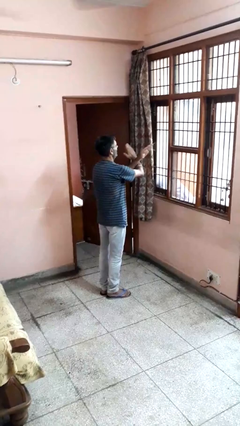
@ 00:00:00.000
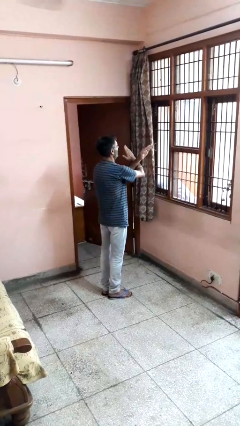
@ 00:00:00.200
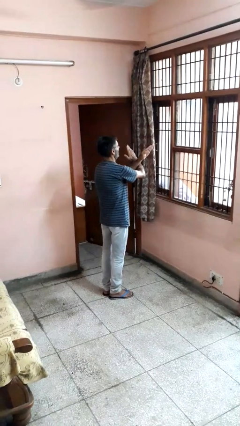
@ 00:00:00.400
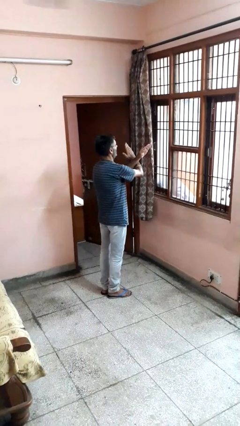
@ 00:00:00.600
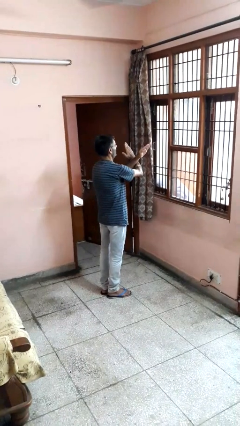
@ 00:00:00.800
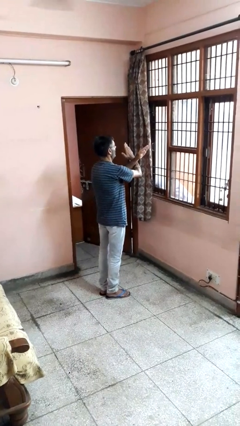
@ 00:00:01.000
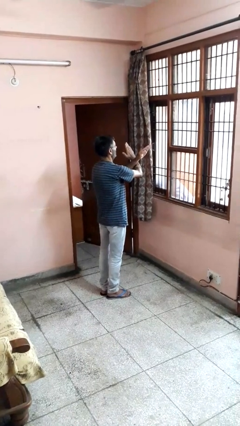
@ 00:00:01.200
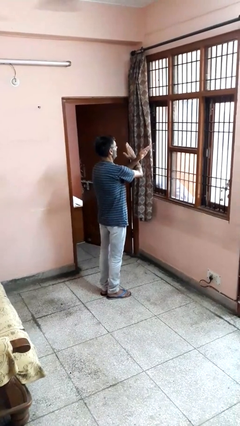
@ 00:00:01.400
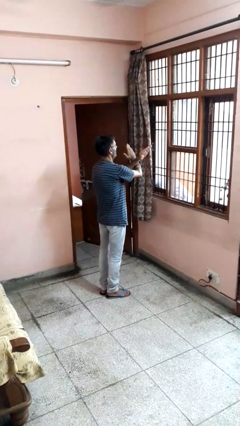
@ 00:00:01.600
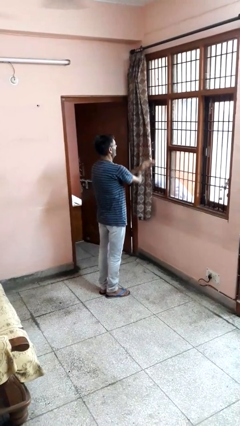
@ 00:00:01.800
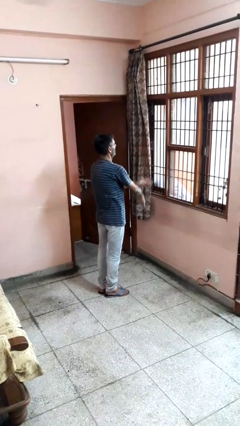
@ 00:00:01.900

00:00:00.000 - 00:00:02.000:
person gestures arms x

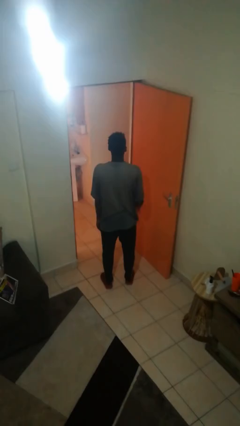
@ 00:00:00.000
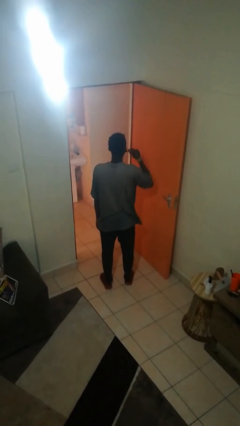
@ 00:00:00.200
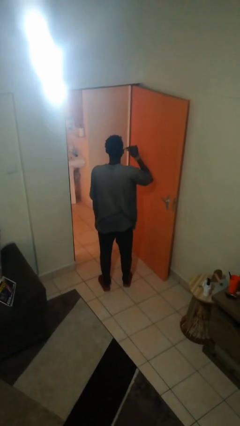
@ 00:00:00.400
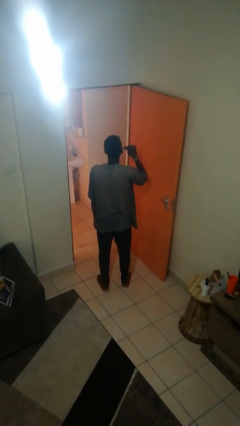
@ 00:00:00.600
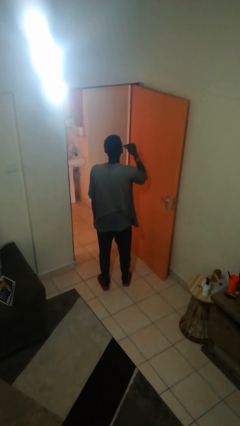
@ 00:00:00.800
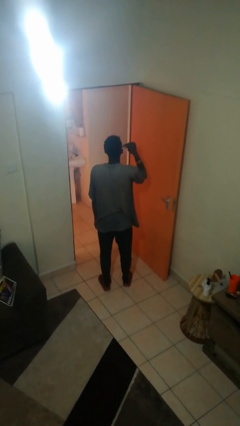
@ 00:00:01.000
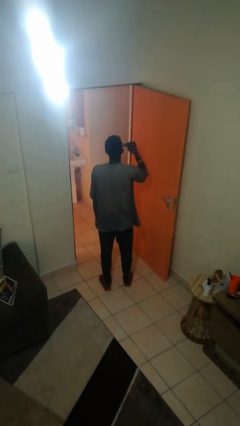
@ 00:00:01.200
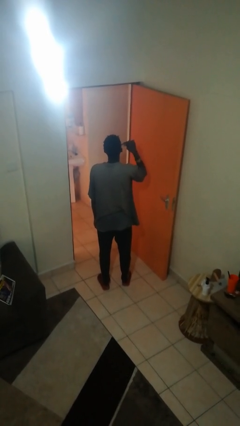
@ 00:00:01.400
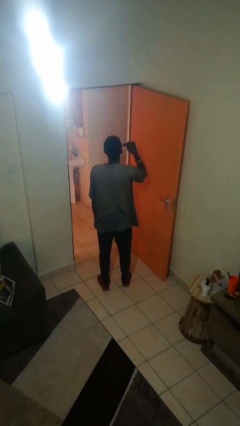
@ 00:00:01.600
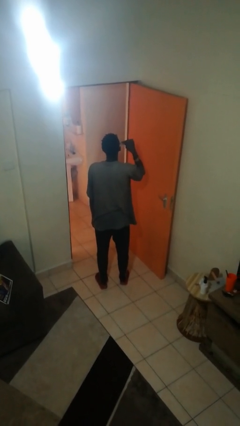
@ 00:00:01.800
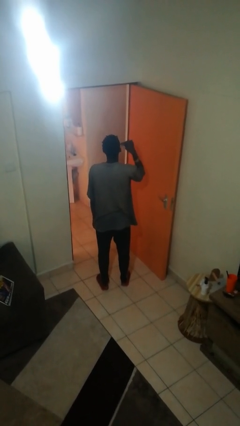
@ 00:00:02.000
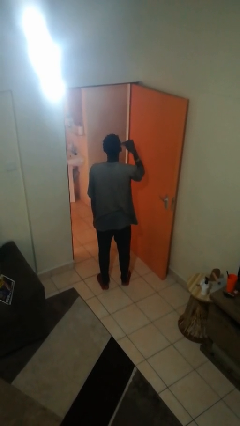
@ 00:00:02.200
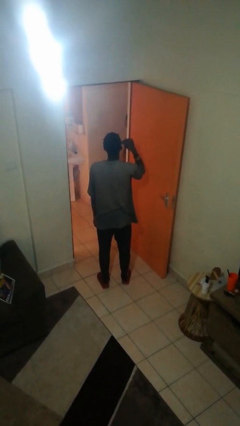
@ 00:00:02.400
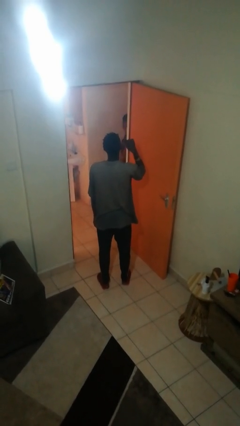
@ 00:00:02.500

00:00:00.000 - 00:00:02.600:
person brushes teeth

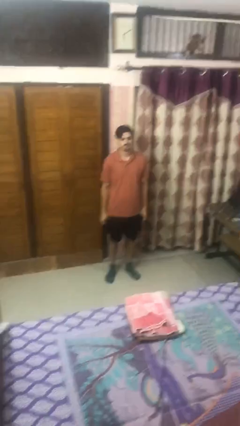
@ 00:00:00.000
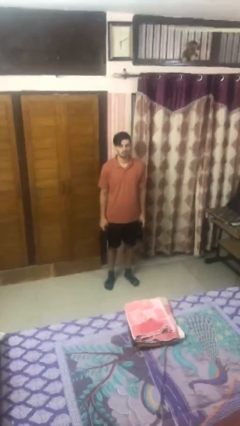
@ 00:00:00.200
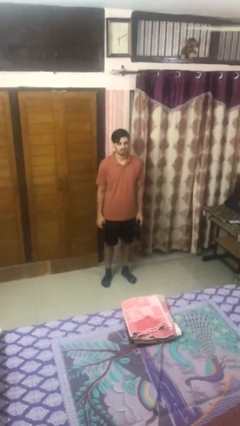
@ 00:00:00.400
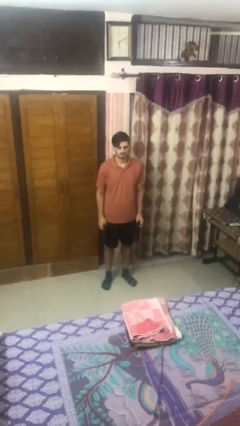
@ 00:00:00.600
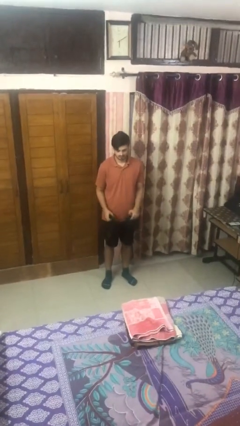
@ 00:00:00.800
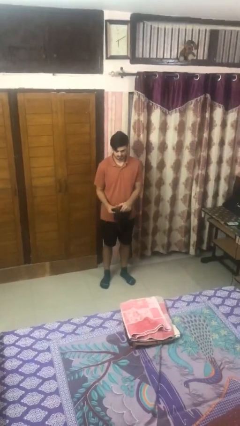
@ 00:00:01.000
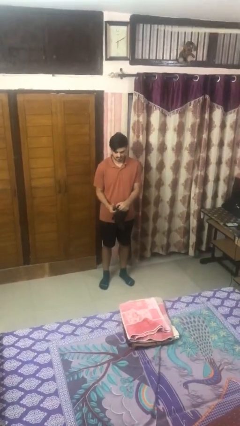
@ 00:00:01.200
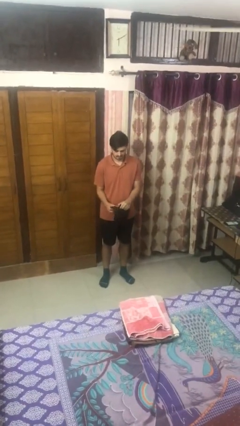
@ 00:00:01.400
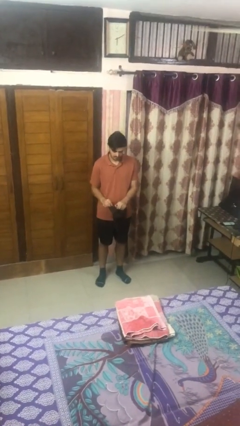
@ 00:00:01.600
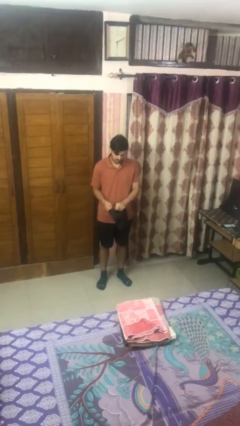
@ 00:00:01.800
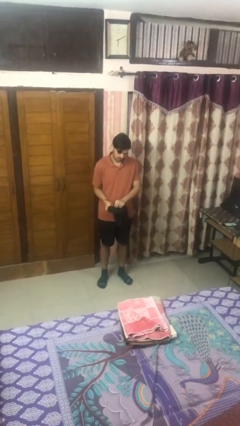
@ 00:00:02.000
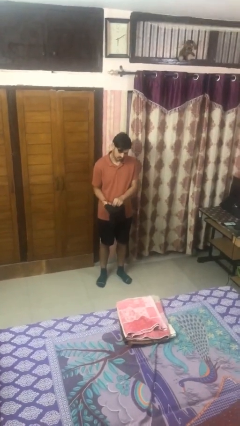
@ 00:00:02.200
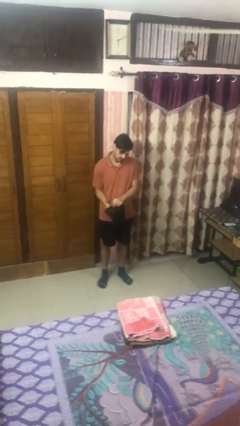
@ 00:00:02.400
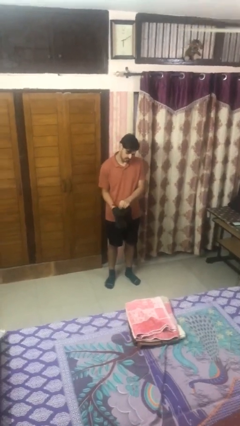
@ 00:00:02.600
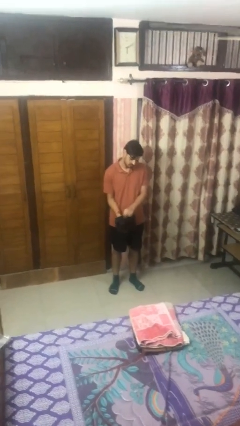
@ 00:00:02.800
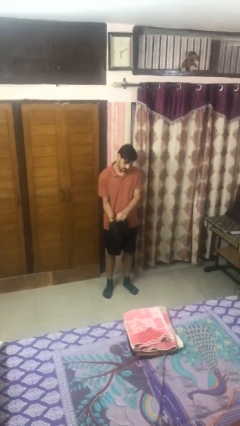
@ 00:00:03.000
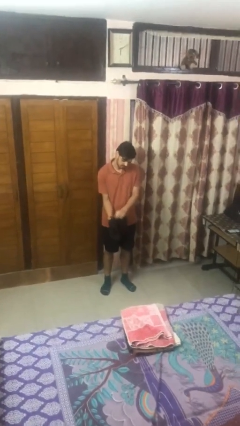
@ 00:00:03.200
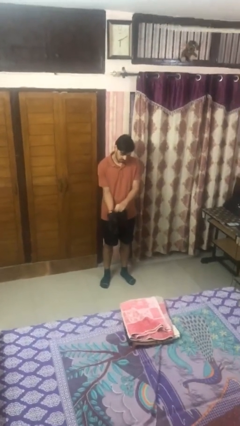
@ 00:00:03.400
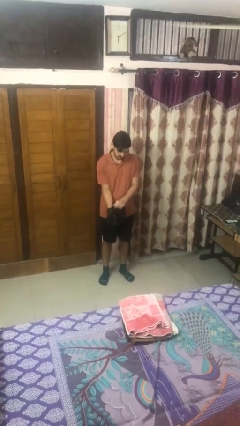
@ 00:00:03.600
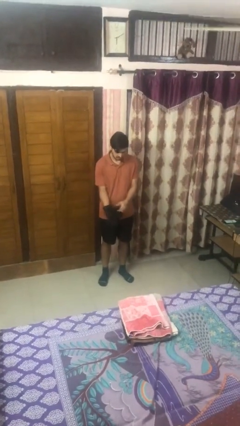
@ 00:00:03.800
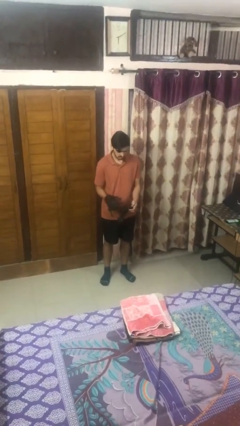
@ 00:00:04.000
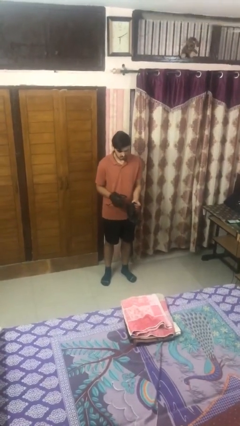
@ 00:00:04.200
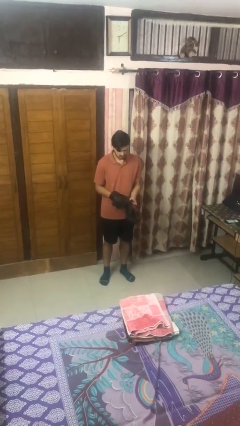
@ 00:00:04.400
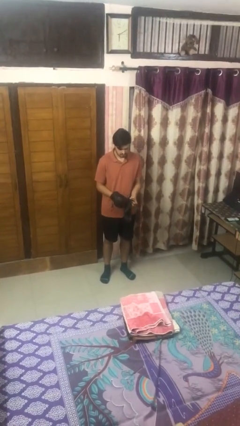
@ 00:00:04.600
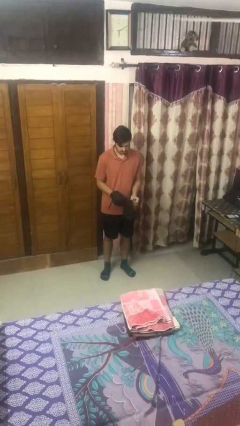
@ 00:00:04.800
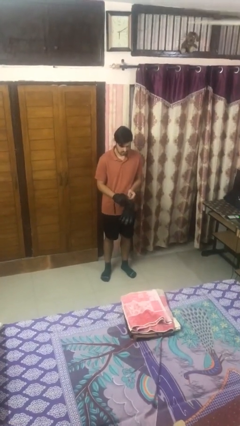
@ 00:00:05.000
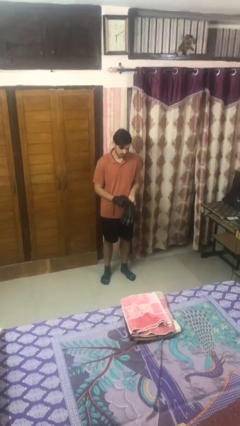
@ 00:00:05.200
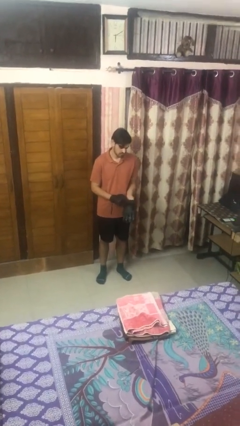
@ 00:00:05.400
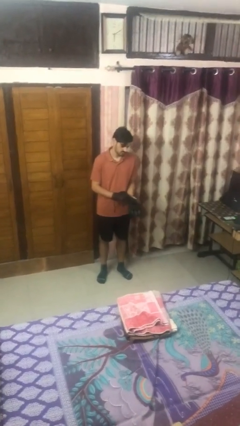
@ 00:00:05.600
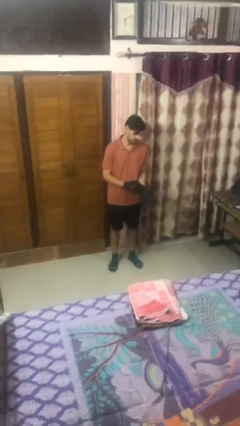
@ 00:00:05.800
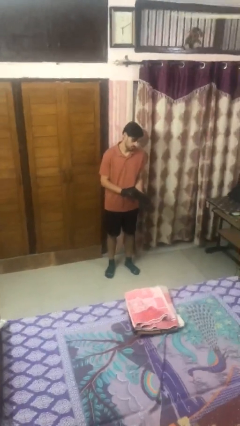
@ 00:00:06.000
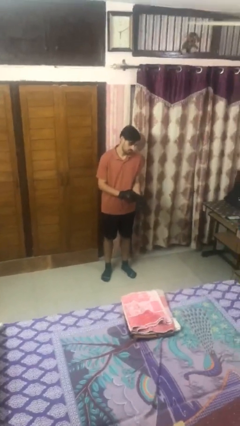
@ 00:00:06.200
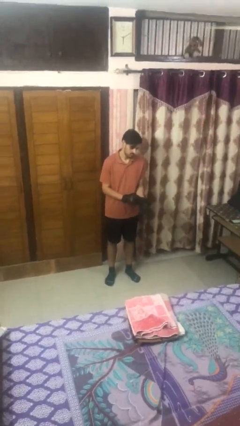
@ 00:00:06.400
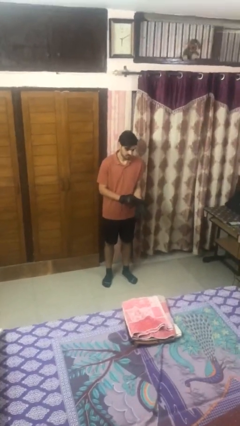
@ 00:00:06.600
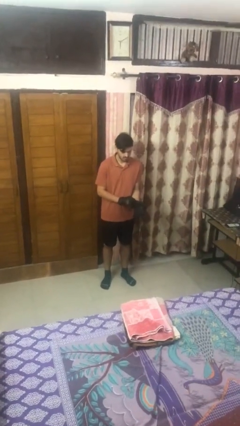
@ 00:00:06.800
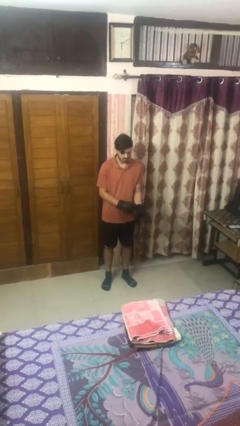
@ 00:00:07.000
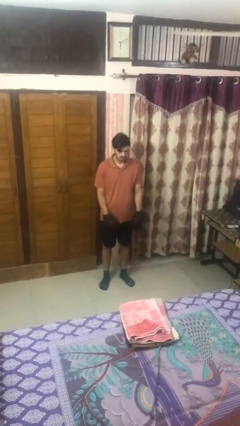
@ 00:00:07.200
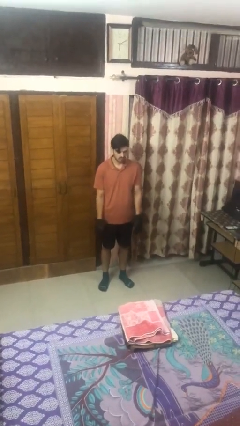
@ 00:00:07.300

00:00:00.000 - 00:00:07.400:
person puts on gloves

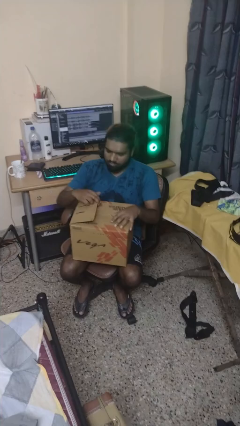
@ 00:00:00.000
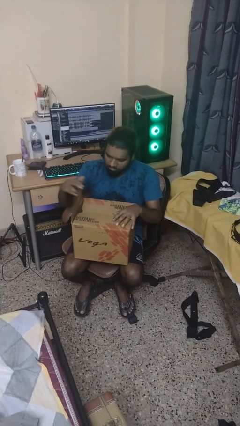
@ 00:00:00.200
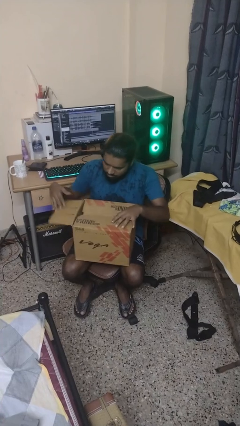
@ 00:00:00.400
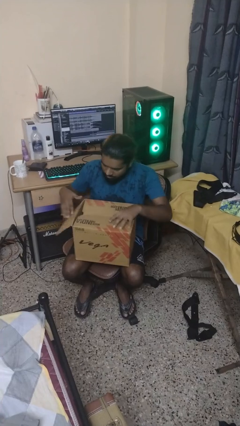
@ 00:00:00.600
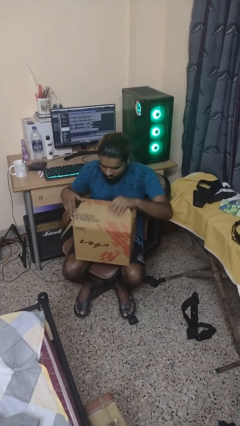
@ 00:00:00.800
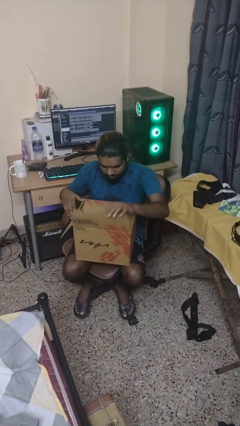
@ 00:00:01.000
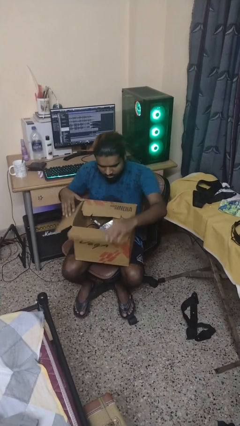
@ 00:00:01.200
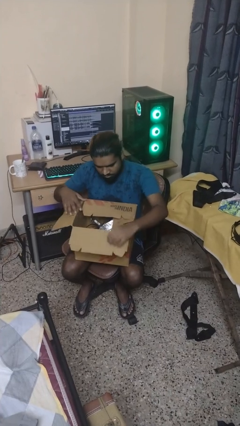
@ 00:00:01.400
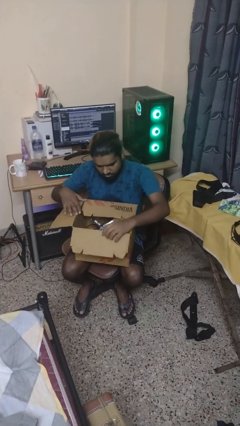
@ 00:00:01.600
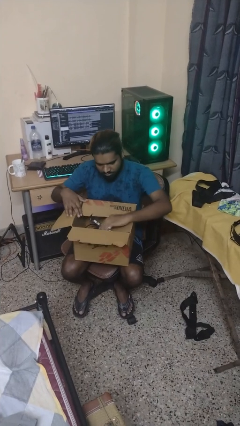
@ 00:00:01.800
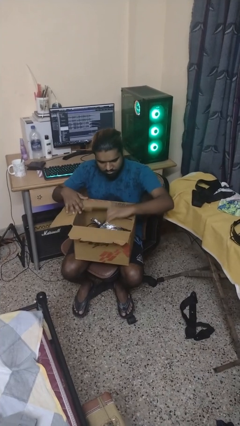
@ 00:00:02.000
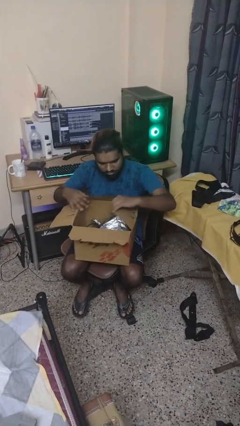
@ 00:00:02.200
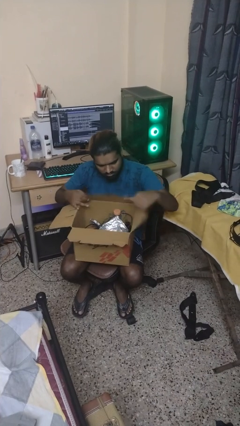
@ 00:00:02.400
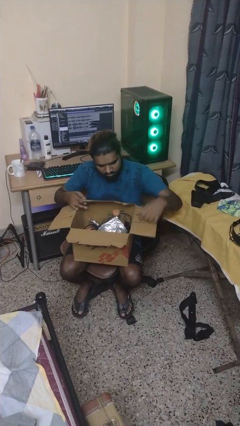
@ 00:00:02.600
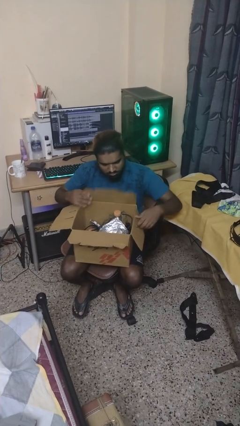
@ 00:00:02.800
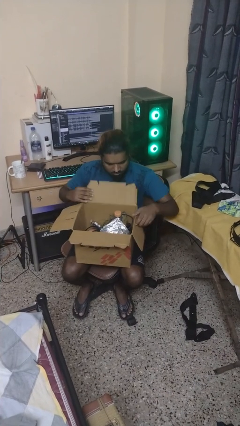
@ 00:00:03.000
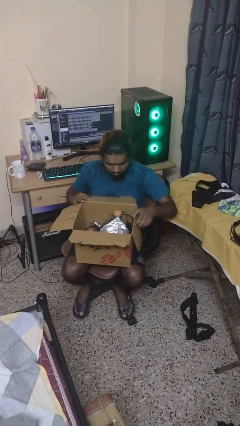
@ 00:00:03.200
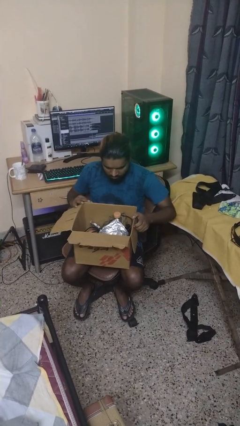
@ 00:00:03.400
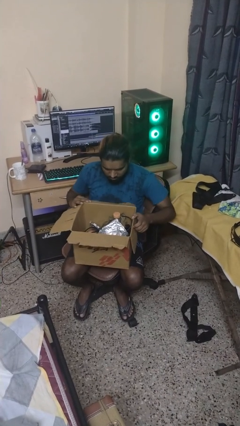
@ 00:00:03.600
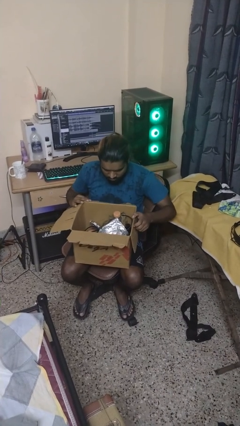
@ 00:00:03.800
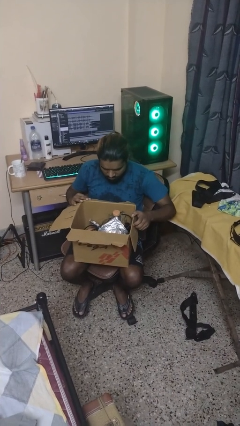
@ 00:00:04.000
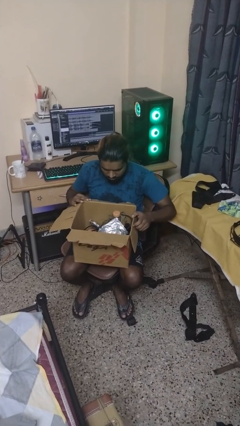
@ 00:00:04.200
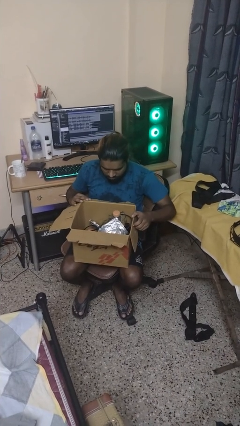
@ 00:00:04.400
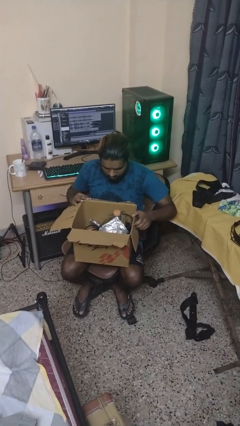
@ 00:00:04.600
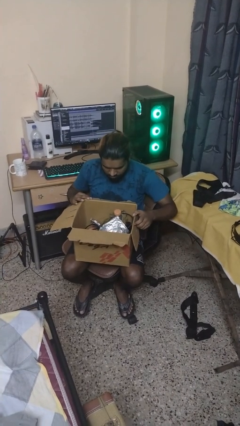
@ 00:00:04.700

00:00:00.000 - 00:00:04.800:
person opens box

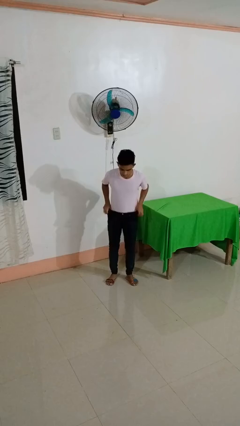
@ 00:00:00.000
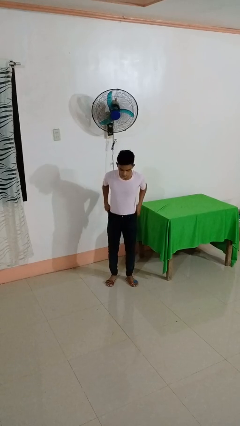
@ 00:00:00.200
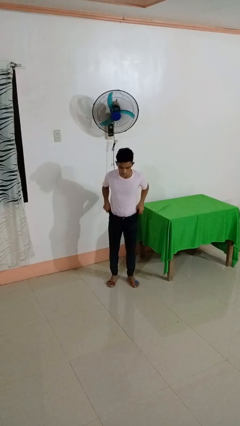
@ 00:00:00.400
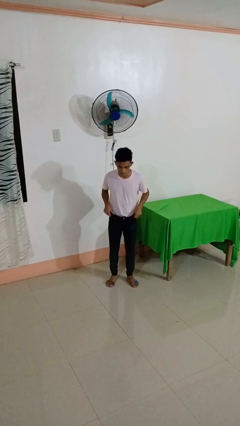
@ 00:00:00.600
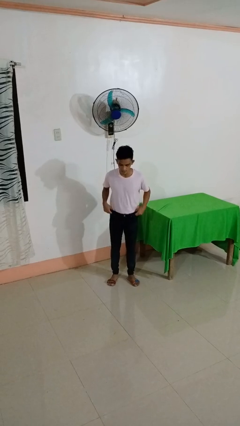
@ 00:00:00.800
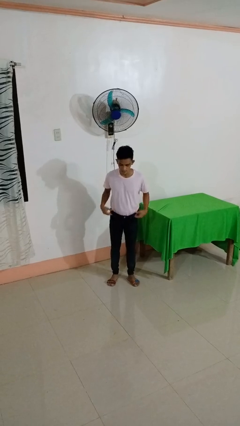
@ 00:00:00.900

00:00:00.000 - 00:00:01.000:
person hikes up pants
